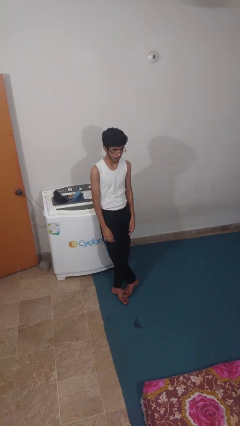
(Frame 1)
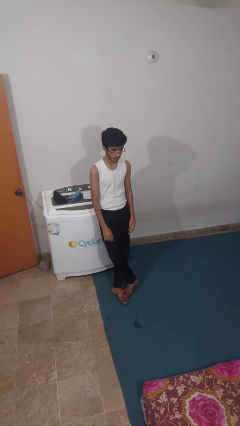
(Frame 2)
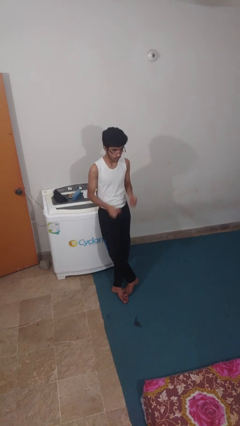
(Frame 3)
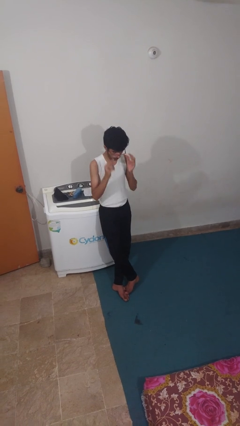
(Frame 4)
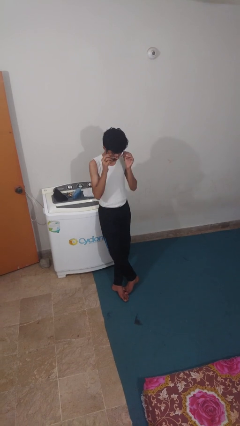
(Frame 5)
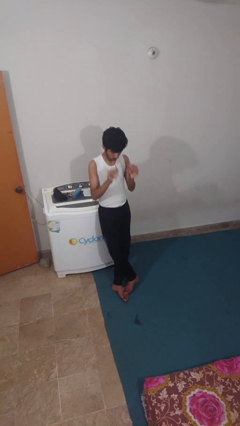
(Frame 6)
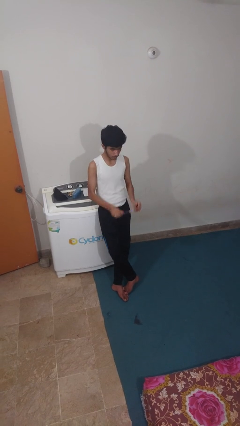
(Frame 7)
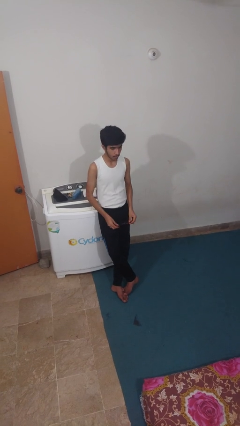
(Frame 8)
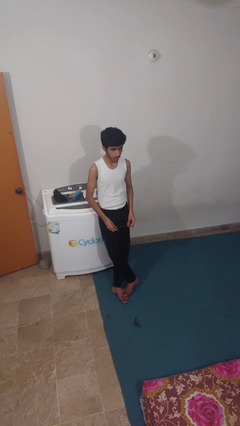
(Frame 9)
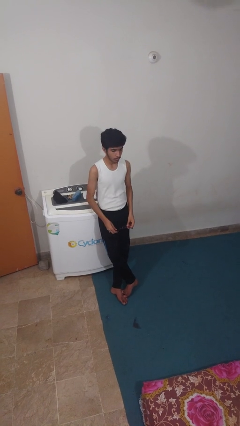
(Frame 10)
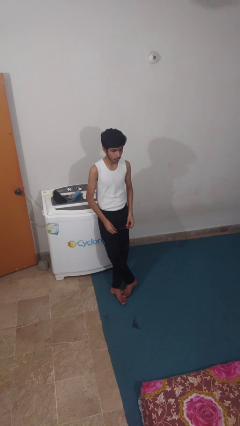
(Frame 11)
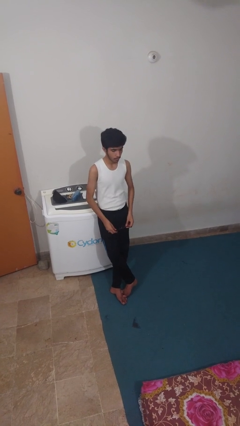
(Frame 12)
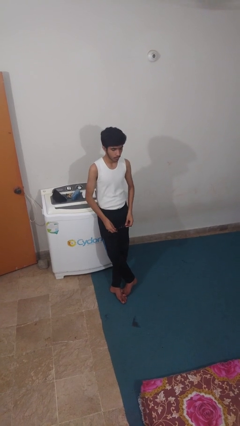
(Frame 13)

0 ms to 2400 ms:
person takes off glasses

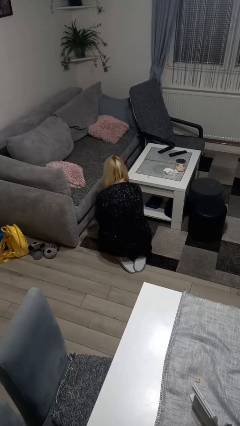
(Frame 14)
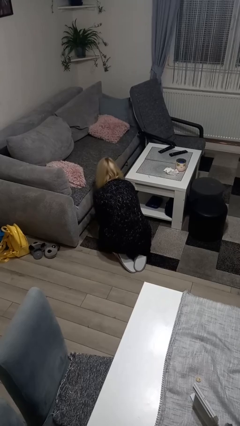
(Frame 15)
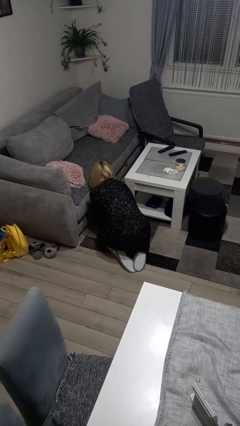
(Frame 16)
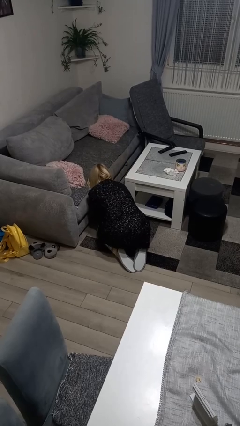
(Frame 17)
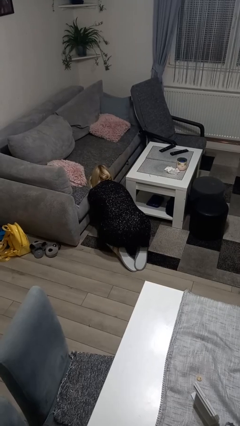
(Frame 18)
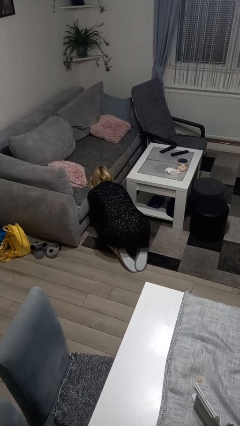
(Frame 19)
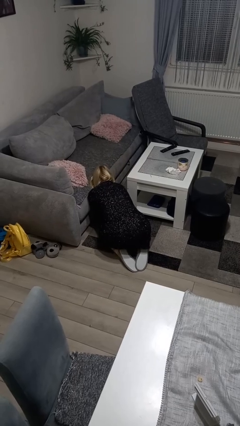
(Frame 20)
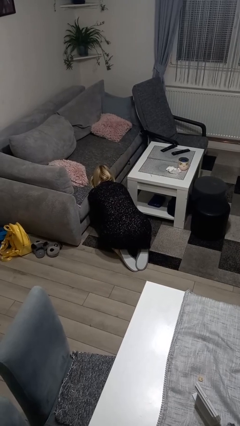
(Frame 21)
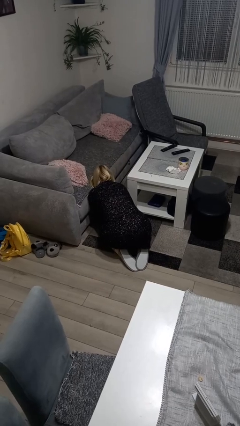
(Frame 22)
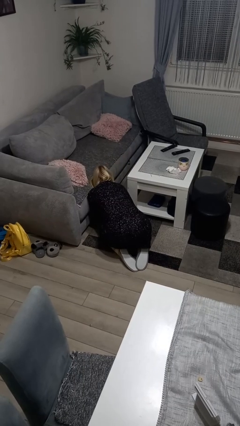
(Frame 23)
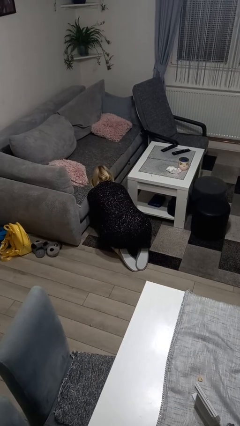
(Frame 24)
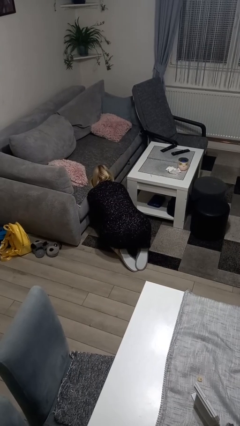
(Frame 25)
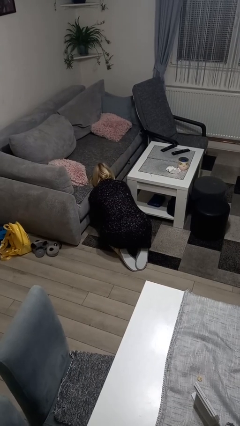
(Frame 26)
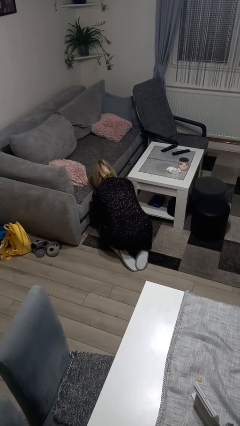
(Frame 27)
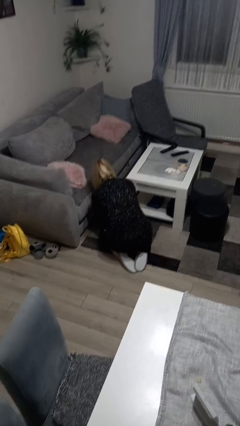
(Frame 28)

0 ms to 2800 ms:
person searches under couch

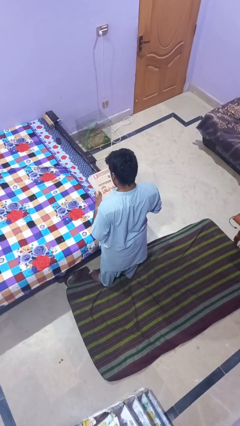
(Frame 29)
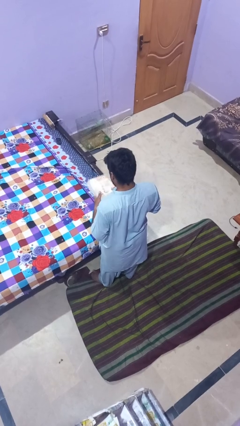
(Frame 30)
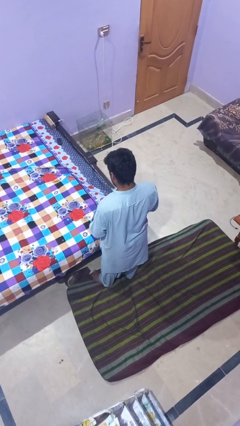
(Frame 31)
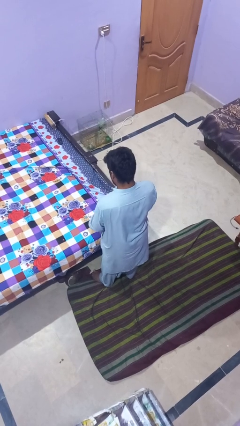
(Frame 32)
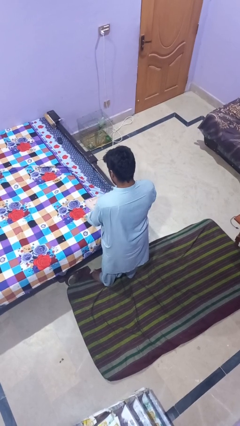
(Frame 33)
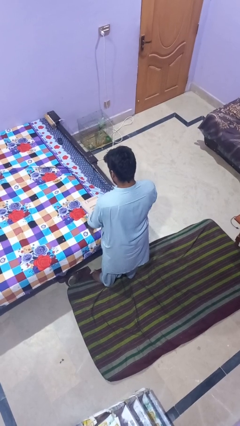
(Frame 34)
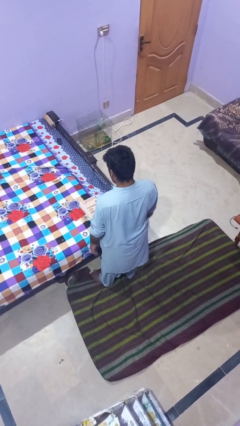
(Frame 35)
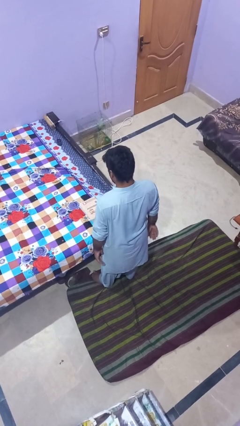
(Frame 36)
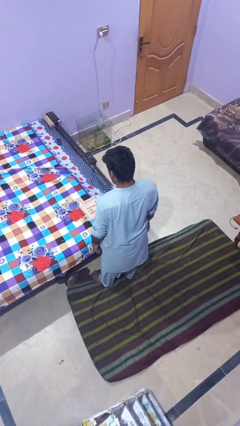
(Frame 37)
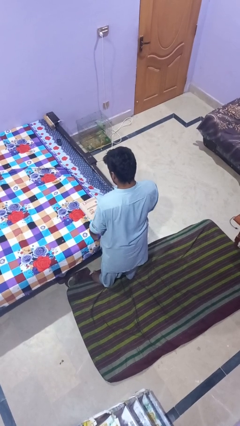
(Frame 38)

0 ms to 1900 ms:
person puts down object on bed

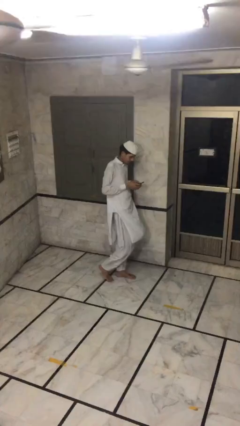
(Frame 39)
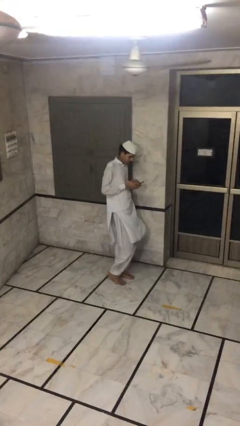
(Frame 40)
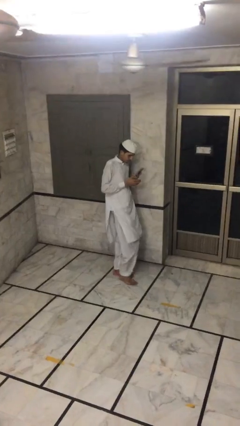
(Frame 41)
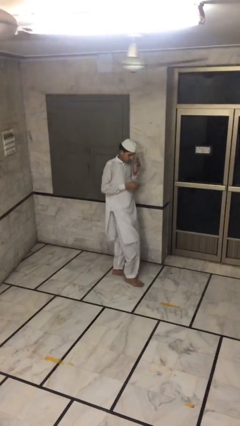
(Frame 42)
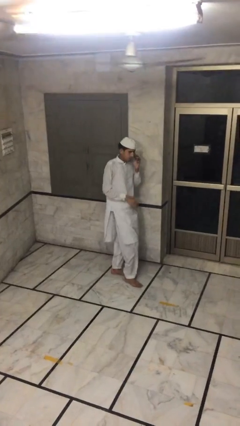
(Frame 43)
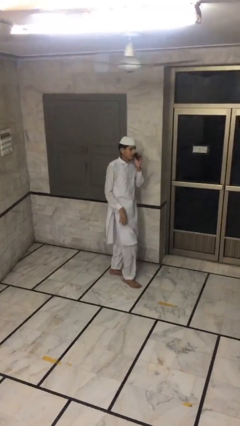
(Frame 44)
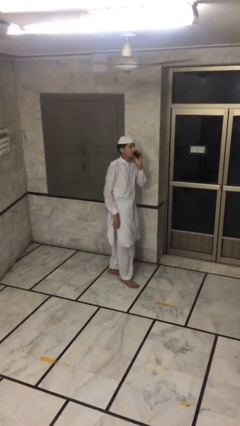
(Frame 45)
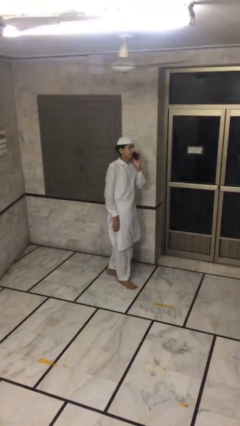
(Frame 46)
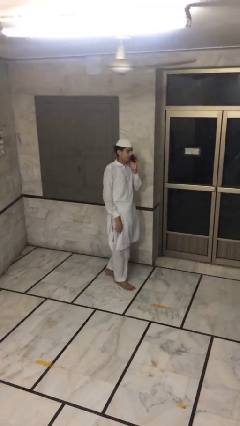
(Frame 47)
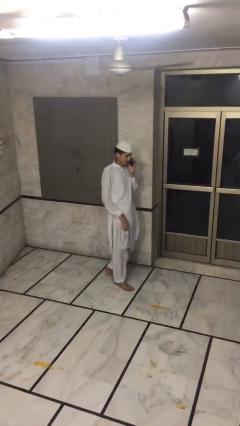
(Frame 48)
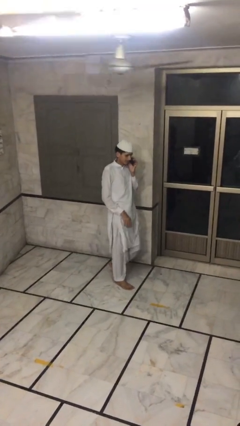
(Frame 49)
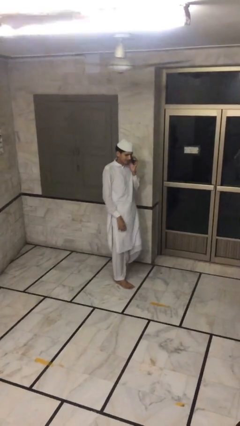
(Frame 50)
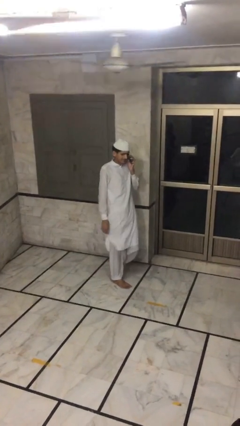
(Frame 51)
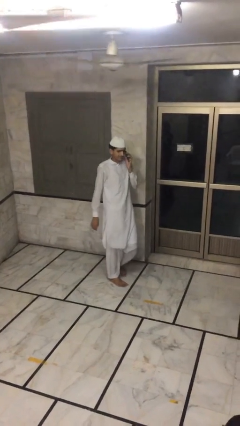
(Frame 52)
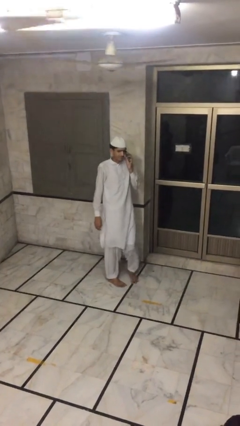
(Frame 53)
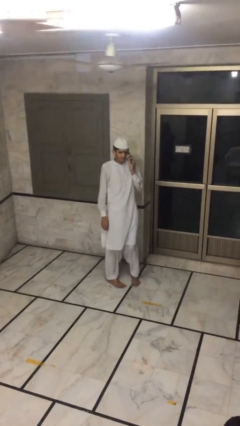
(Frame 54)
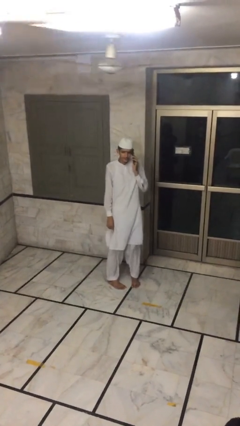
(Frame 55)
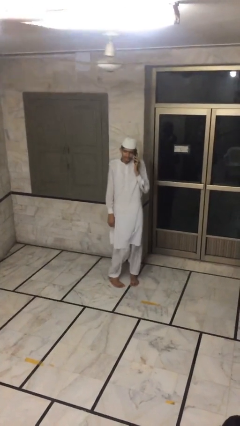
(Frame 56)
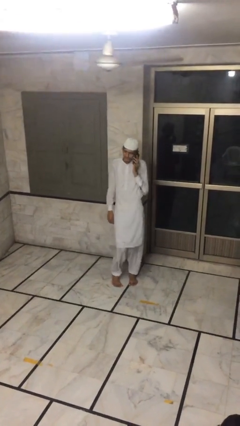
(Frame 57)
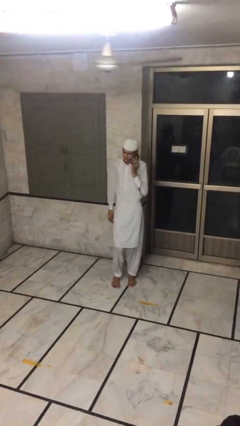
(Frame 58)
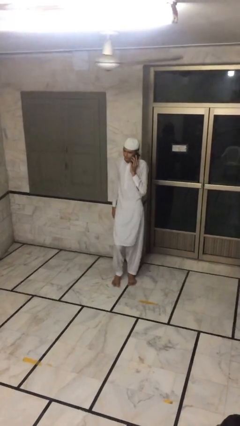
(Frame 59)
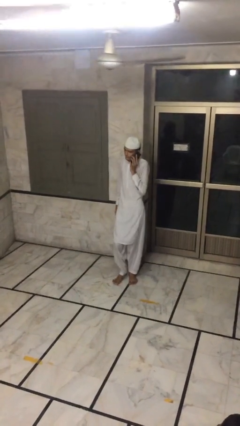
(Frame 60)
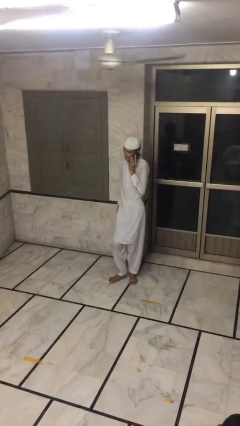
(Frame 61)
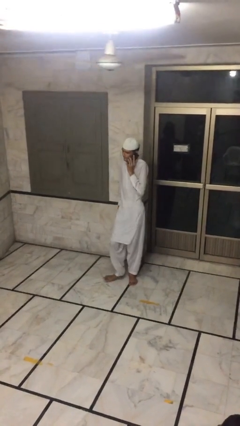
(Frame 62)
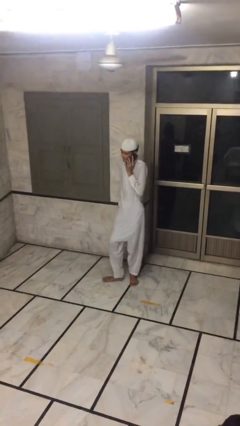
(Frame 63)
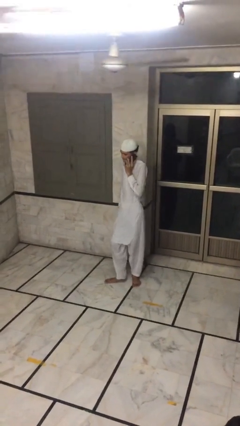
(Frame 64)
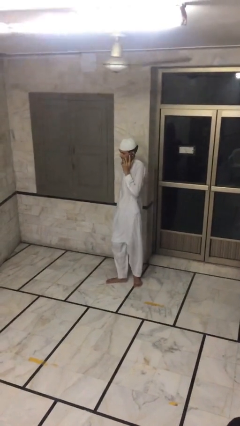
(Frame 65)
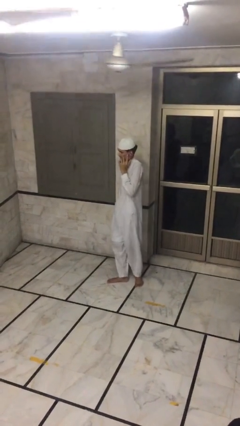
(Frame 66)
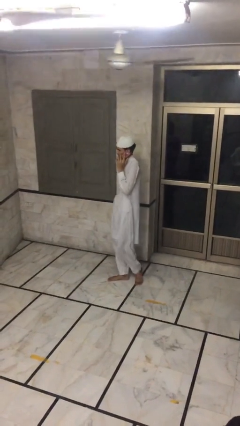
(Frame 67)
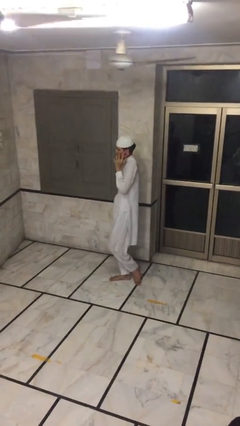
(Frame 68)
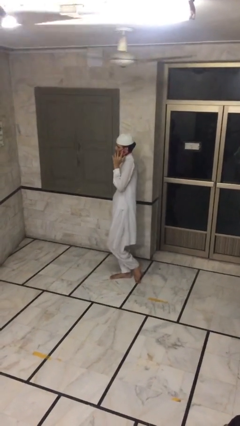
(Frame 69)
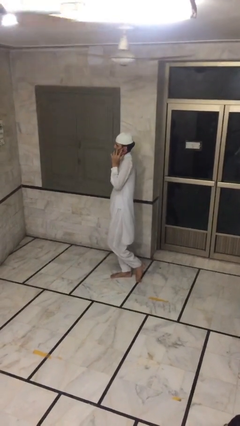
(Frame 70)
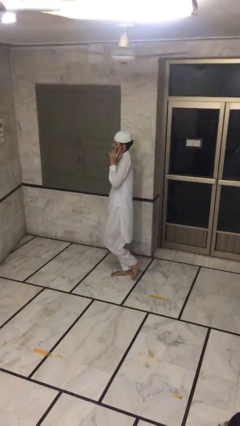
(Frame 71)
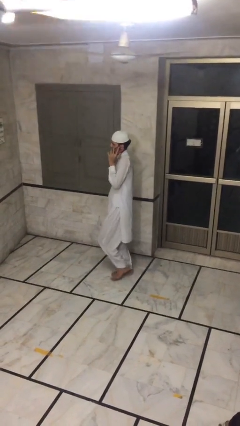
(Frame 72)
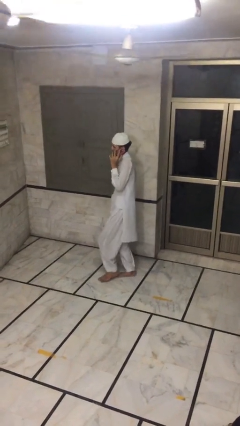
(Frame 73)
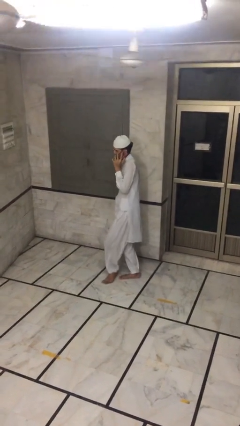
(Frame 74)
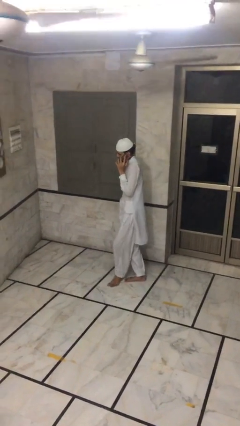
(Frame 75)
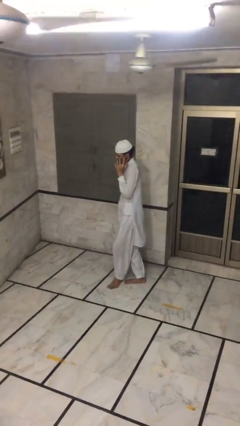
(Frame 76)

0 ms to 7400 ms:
person talks on phone

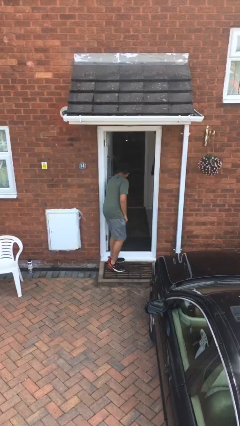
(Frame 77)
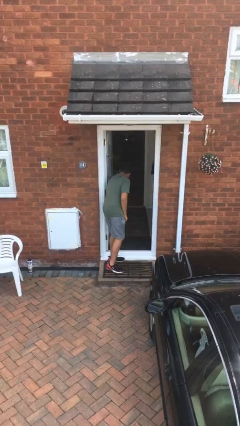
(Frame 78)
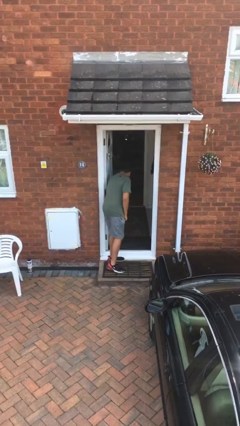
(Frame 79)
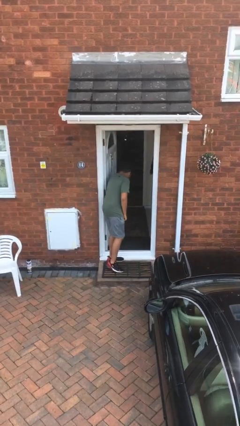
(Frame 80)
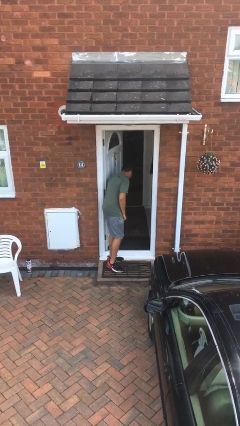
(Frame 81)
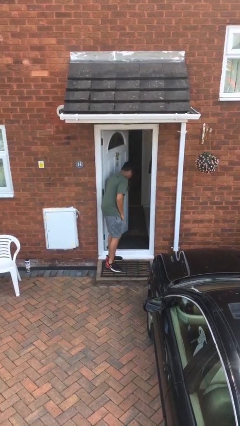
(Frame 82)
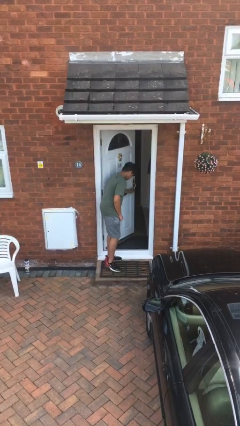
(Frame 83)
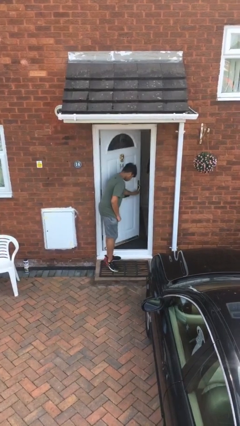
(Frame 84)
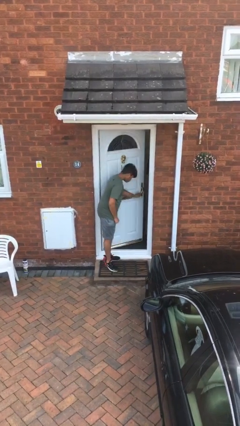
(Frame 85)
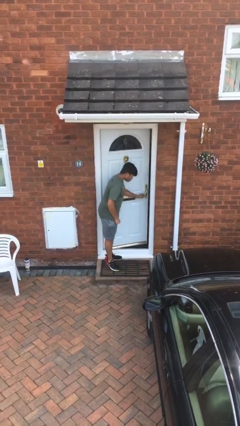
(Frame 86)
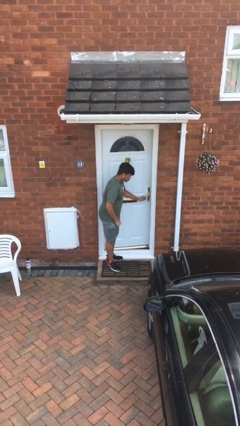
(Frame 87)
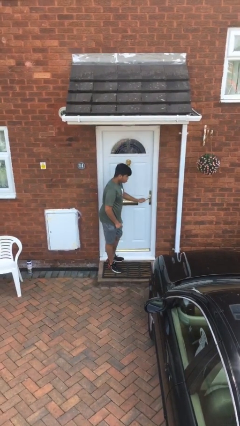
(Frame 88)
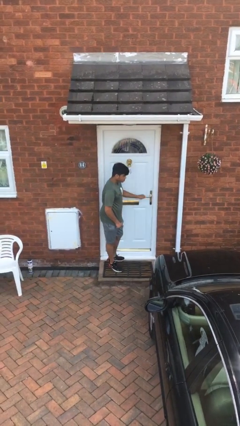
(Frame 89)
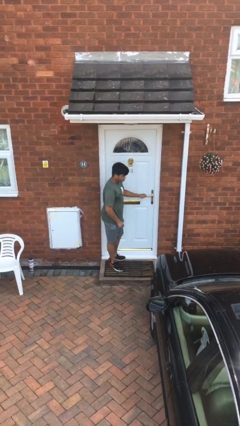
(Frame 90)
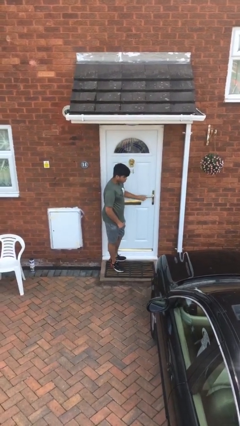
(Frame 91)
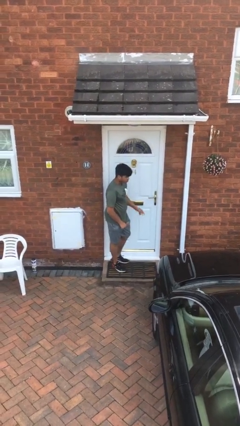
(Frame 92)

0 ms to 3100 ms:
person closes facility door

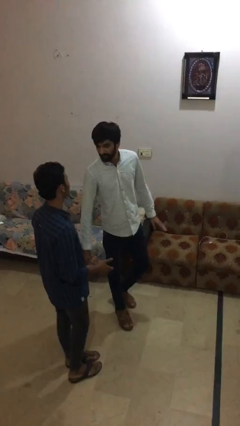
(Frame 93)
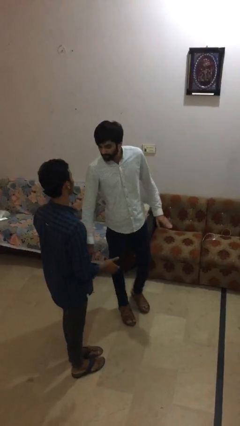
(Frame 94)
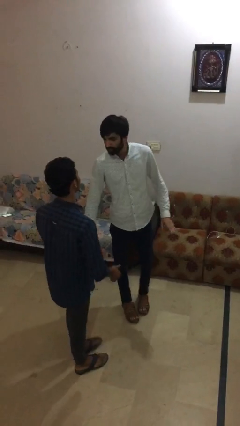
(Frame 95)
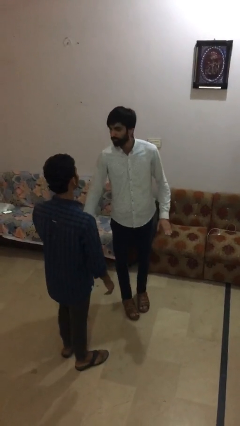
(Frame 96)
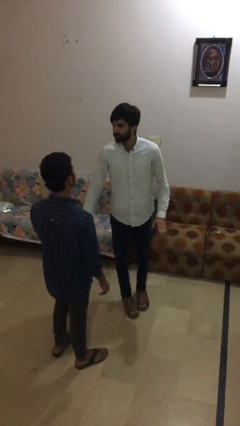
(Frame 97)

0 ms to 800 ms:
person holds hand
